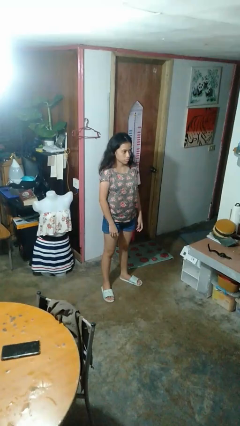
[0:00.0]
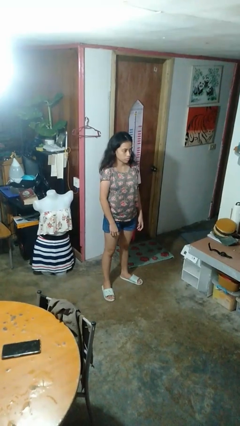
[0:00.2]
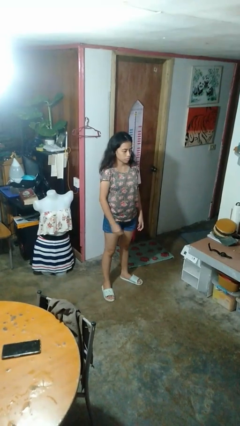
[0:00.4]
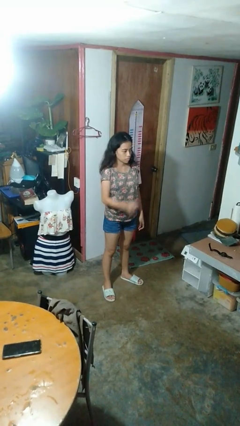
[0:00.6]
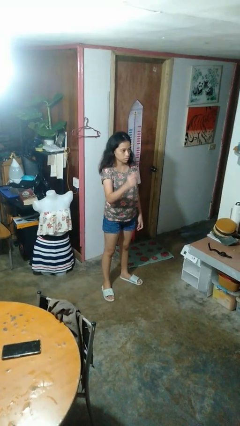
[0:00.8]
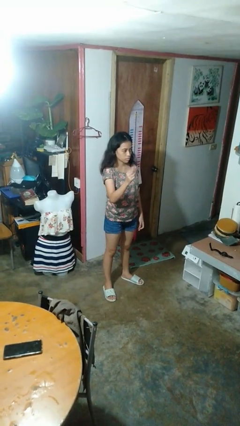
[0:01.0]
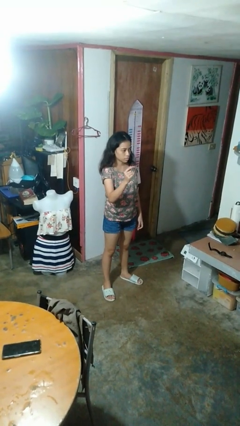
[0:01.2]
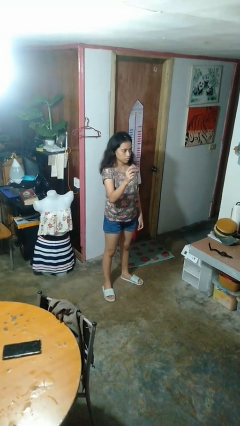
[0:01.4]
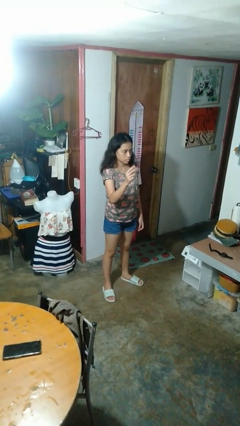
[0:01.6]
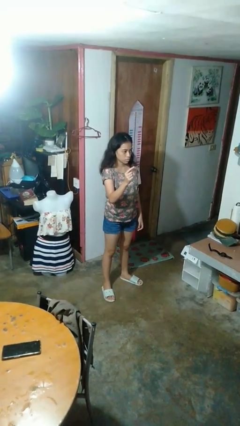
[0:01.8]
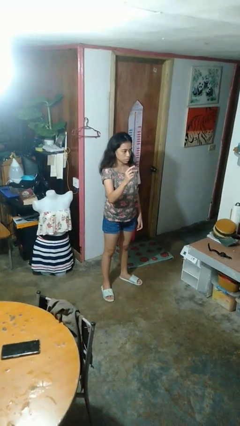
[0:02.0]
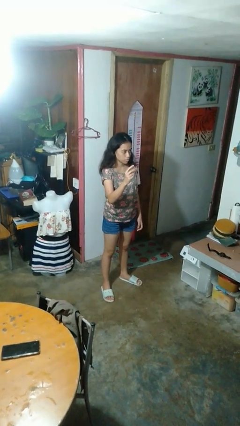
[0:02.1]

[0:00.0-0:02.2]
person snaps fingers

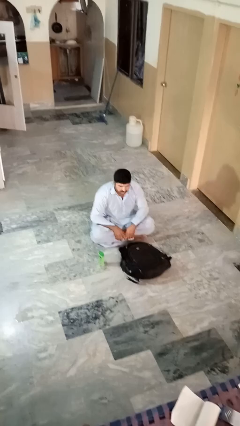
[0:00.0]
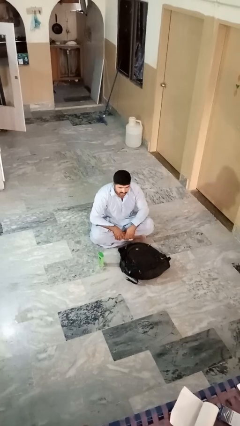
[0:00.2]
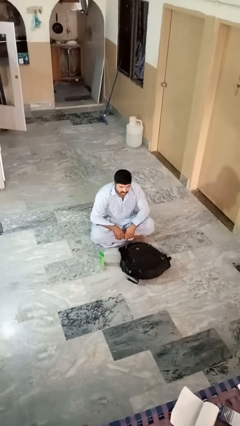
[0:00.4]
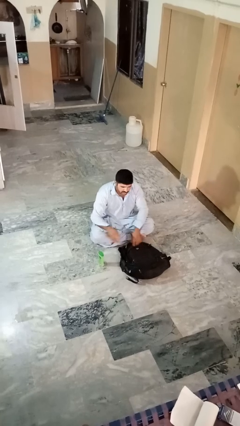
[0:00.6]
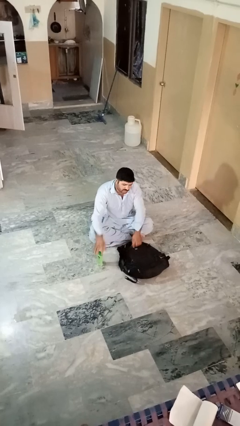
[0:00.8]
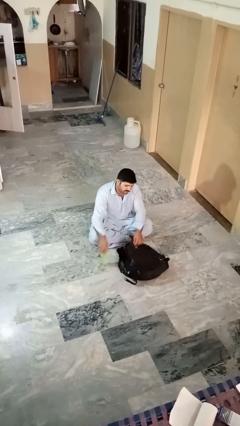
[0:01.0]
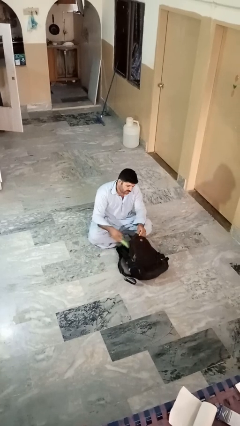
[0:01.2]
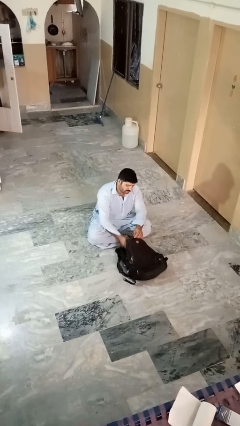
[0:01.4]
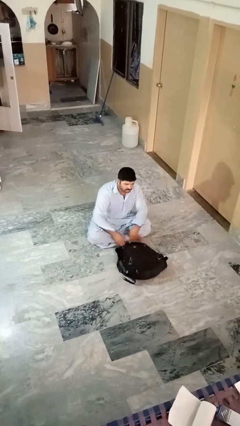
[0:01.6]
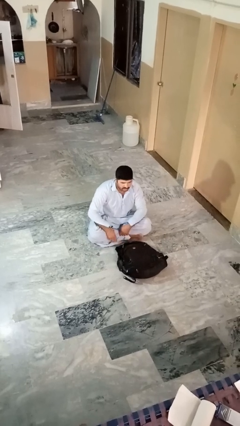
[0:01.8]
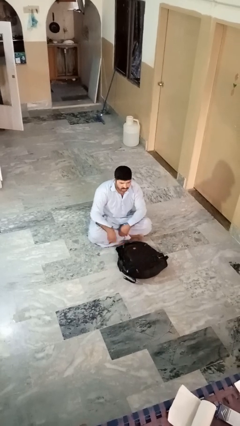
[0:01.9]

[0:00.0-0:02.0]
person puts object into bag

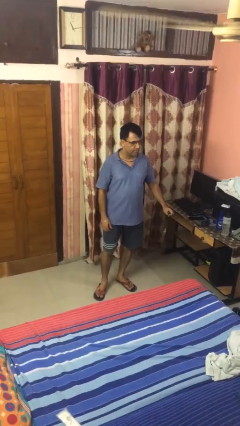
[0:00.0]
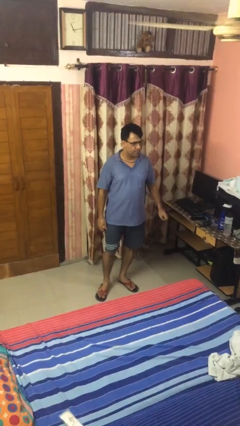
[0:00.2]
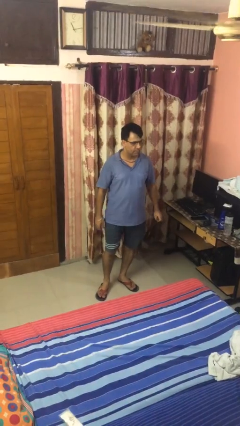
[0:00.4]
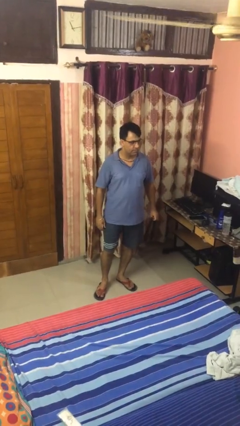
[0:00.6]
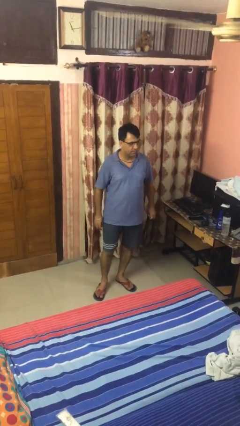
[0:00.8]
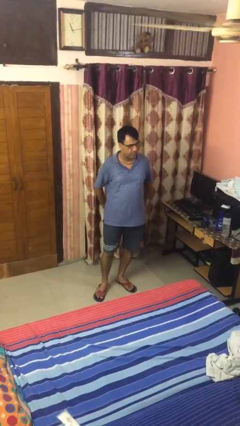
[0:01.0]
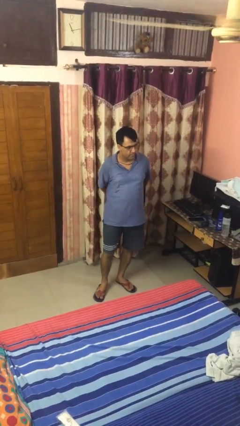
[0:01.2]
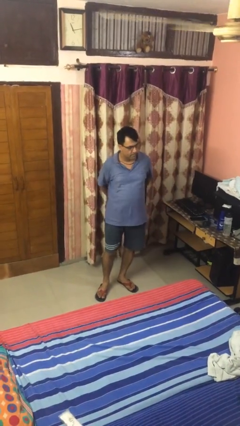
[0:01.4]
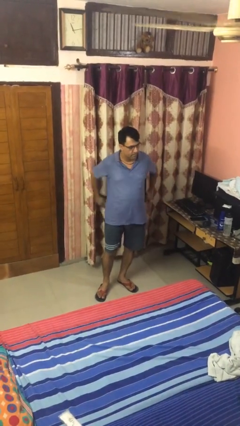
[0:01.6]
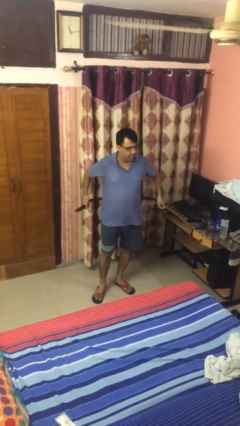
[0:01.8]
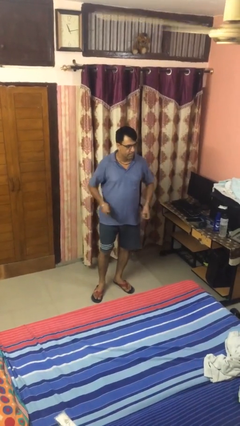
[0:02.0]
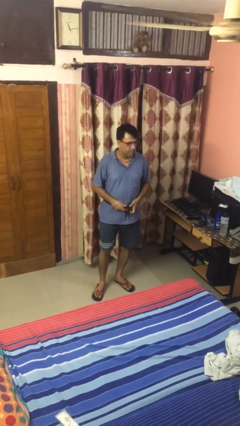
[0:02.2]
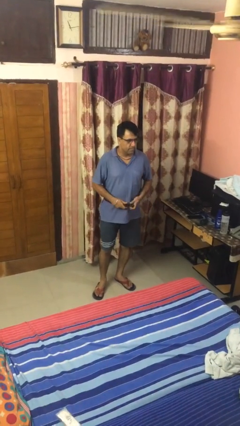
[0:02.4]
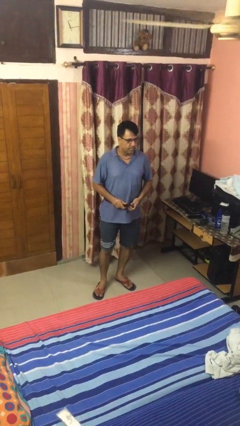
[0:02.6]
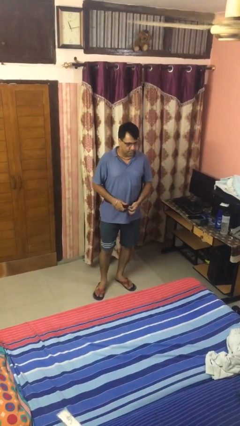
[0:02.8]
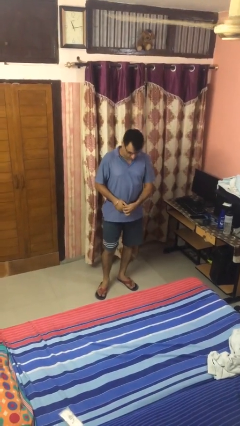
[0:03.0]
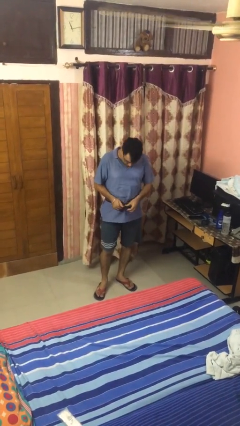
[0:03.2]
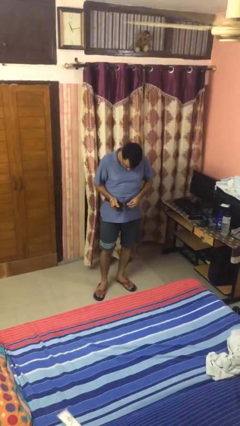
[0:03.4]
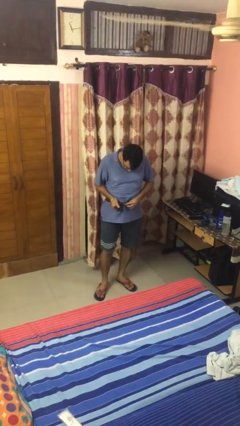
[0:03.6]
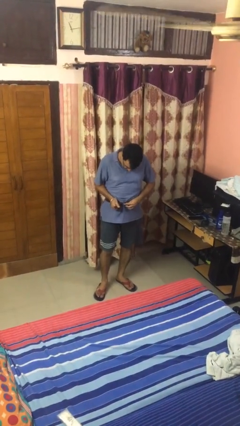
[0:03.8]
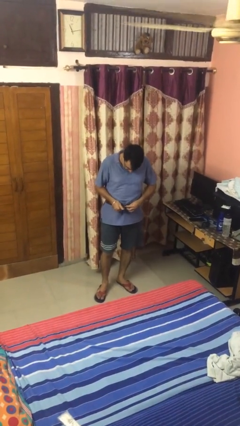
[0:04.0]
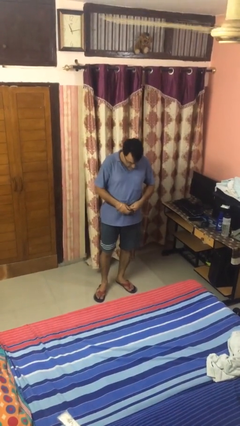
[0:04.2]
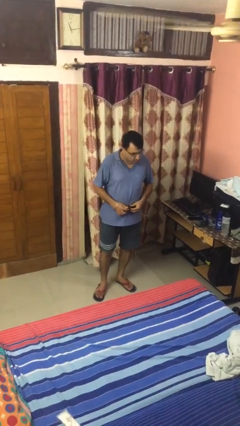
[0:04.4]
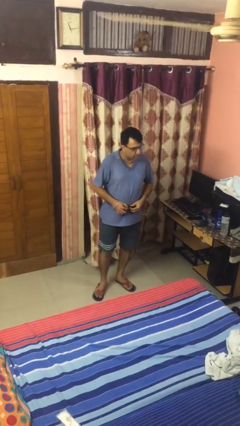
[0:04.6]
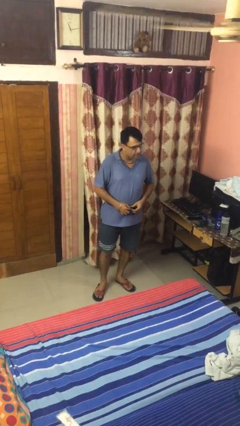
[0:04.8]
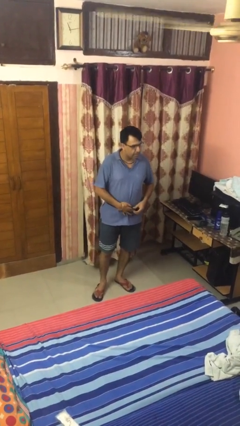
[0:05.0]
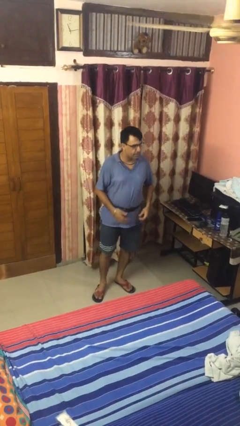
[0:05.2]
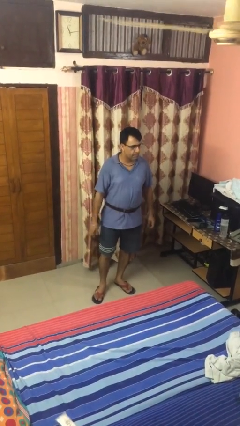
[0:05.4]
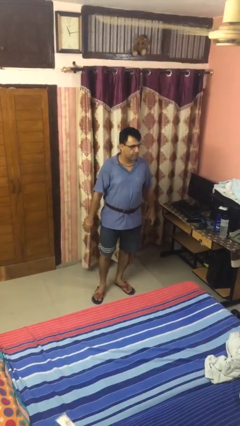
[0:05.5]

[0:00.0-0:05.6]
person puts on belt

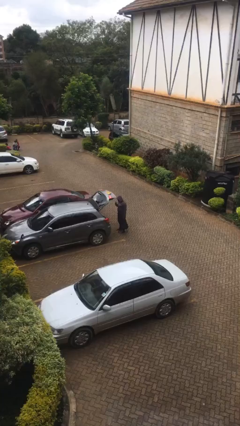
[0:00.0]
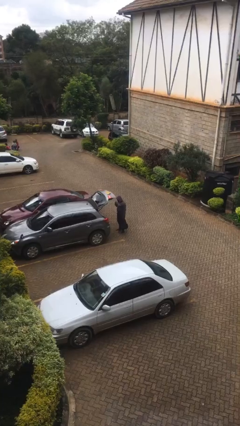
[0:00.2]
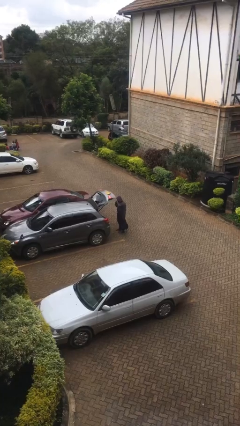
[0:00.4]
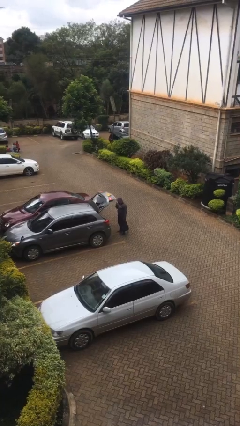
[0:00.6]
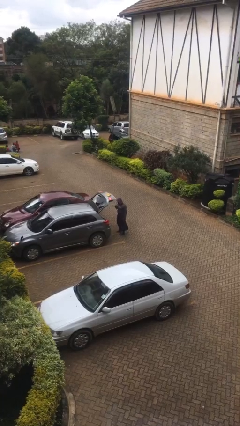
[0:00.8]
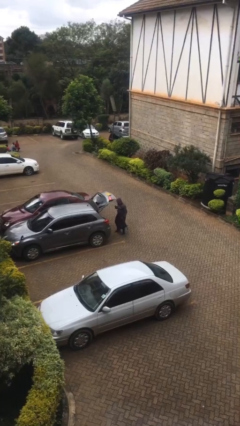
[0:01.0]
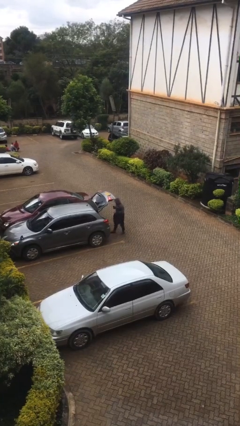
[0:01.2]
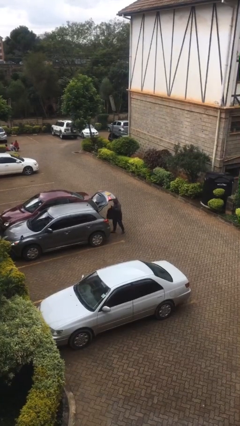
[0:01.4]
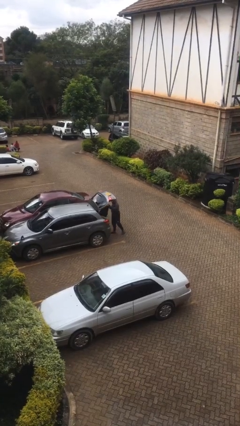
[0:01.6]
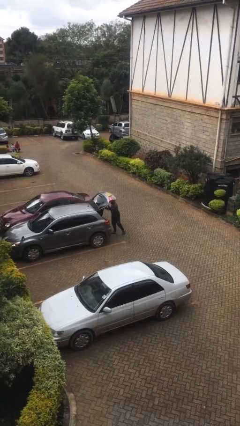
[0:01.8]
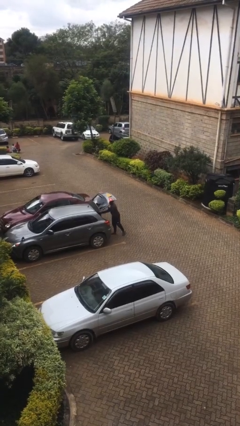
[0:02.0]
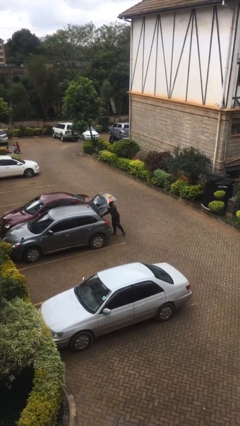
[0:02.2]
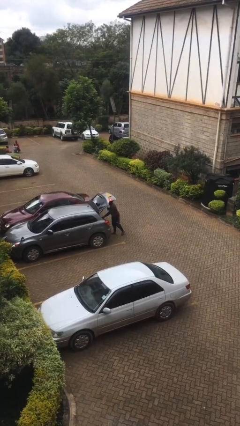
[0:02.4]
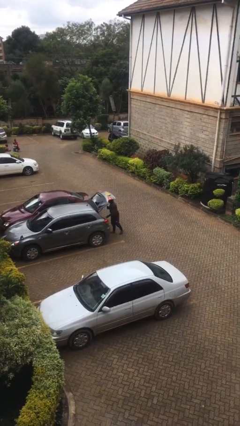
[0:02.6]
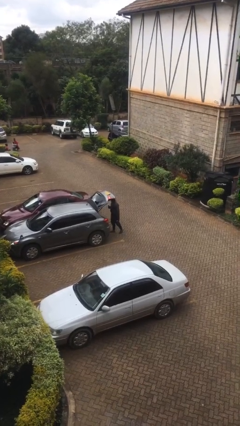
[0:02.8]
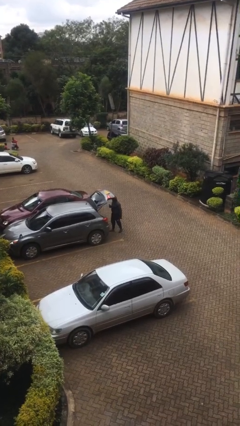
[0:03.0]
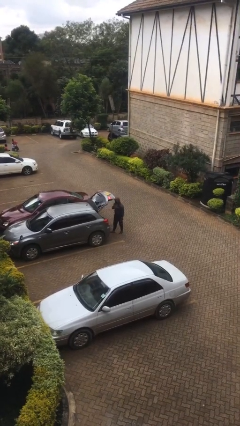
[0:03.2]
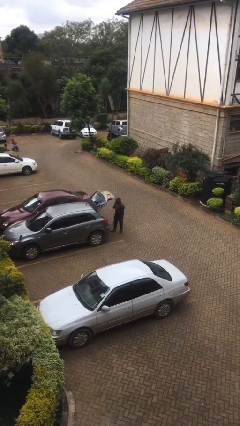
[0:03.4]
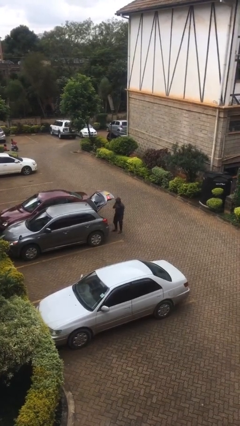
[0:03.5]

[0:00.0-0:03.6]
person loads car

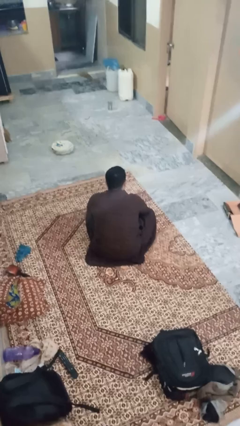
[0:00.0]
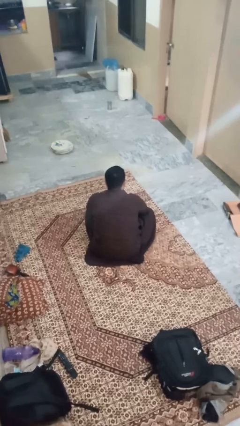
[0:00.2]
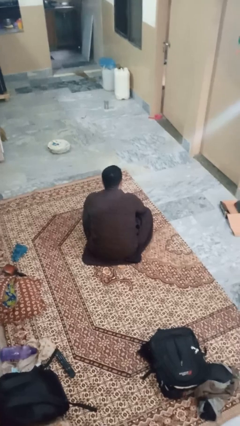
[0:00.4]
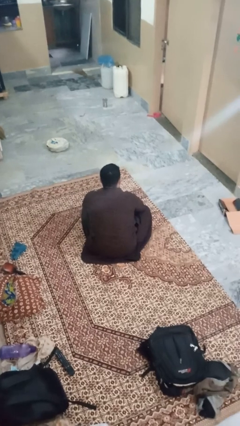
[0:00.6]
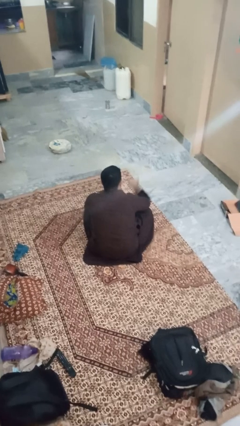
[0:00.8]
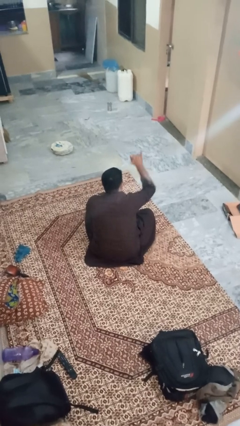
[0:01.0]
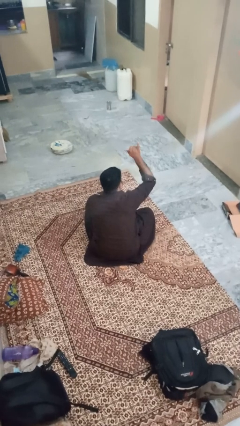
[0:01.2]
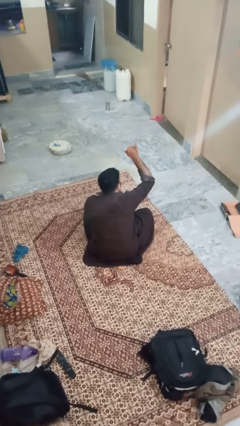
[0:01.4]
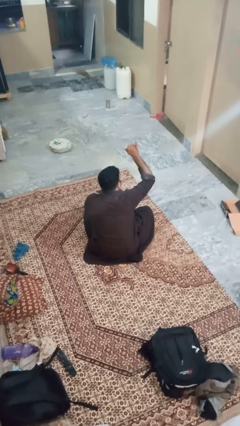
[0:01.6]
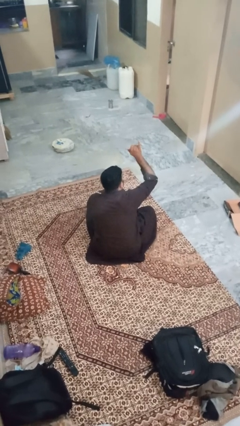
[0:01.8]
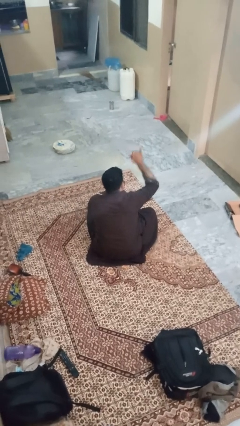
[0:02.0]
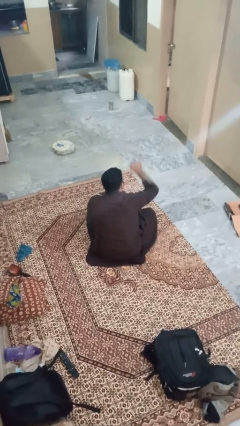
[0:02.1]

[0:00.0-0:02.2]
person gestures hang loose

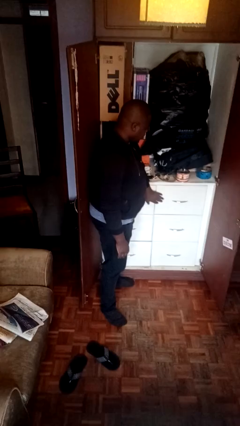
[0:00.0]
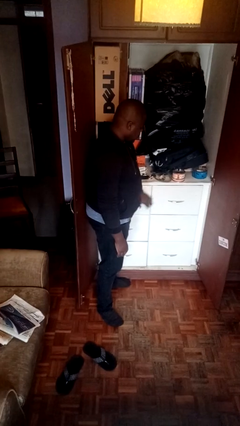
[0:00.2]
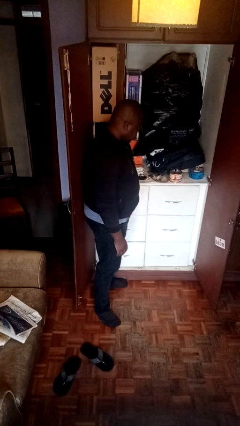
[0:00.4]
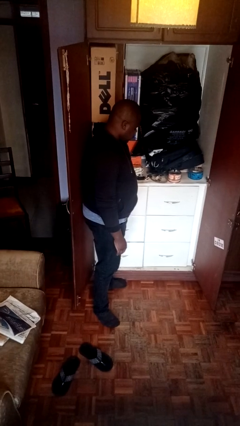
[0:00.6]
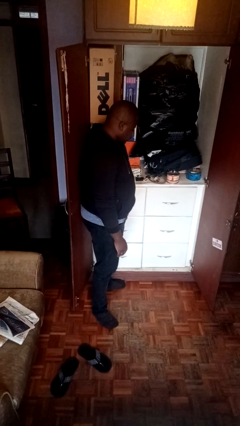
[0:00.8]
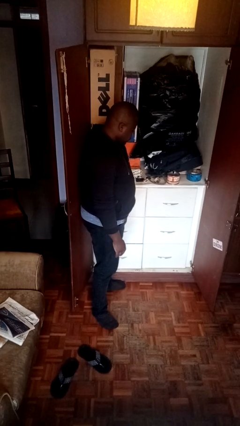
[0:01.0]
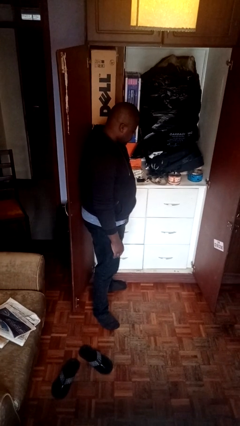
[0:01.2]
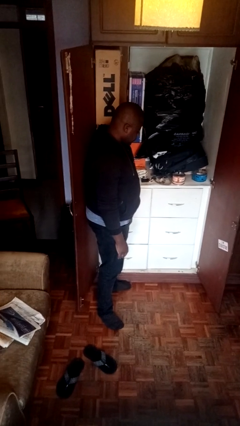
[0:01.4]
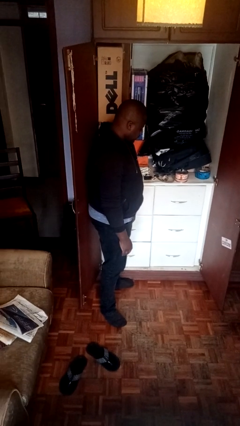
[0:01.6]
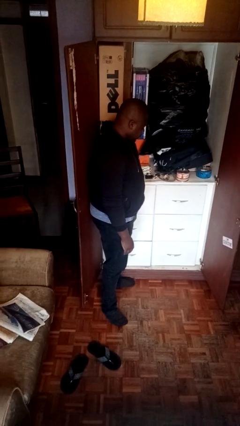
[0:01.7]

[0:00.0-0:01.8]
person closes dresser drawer
